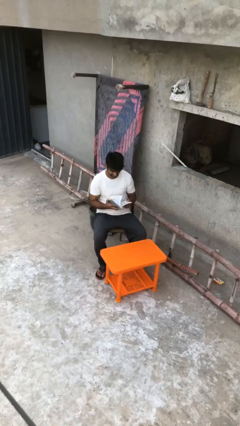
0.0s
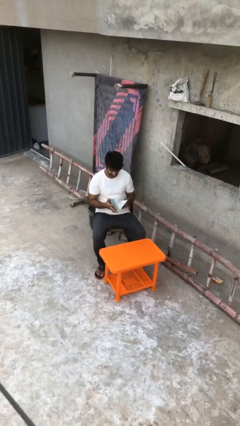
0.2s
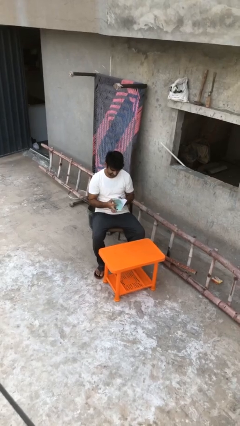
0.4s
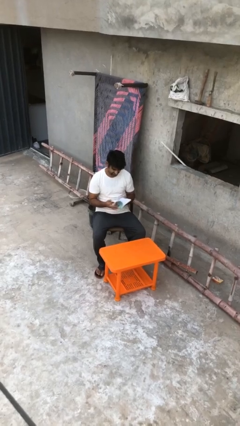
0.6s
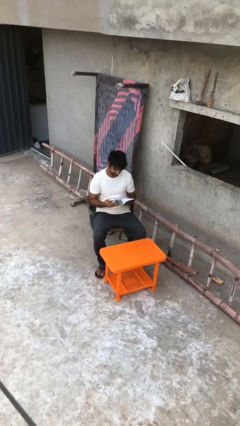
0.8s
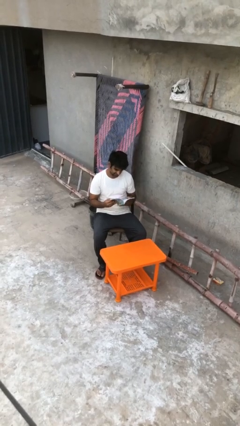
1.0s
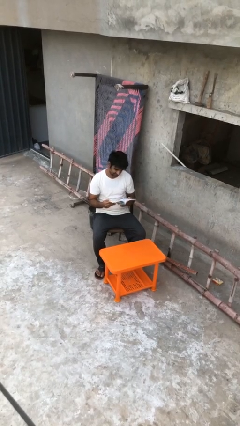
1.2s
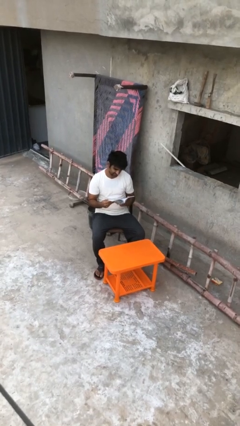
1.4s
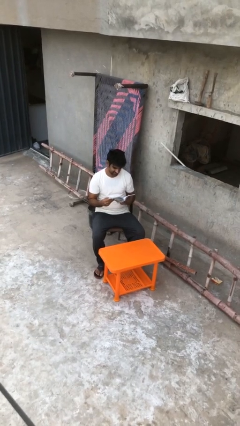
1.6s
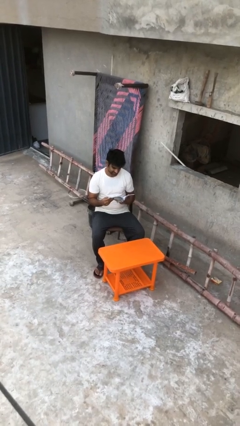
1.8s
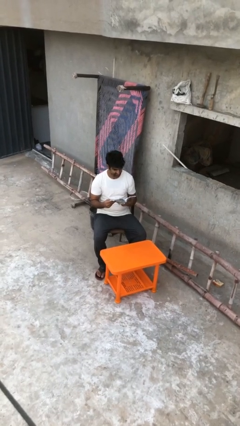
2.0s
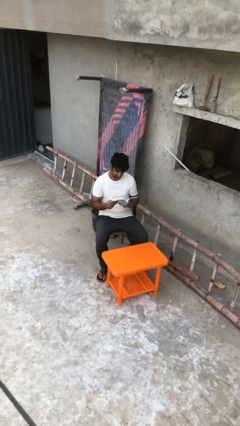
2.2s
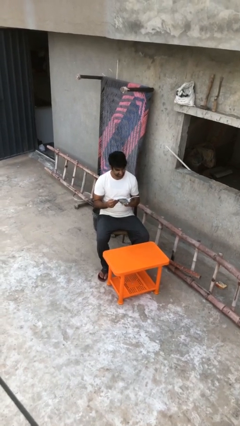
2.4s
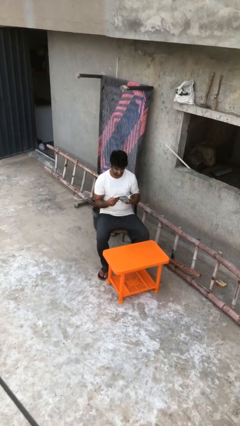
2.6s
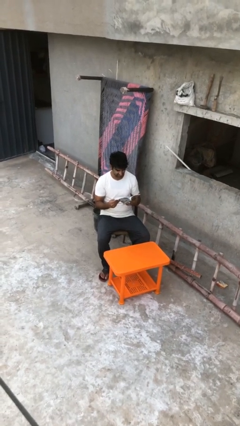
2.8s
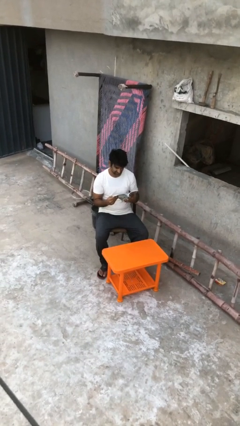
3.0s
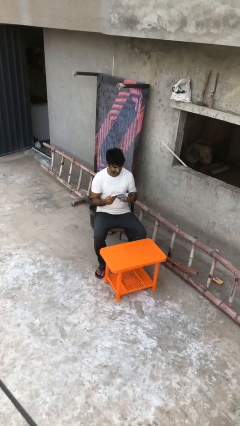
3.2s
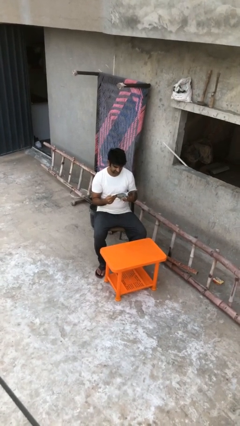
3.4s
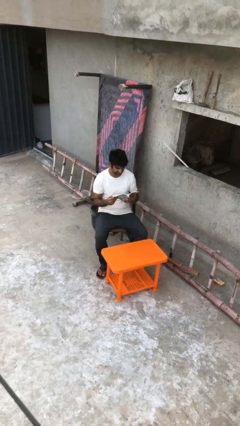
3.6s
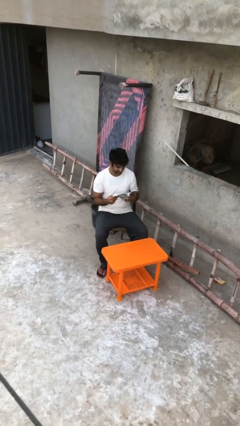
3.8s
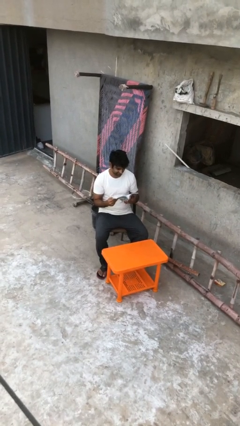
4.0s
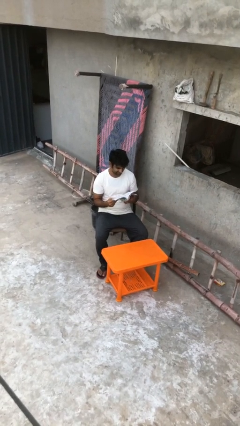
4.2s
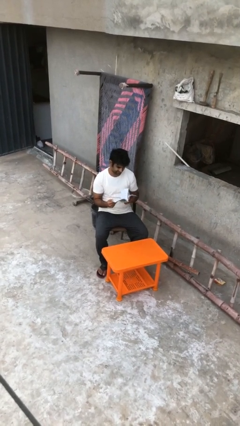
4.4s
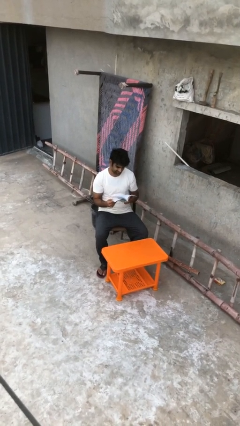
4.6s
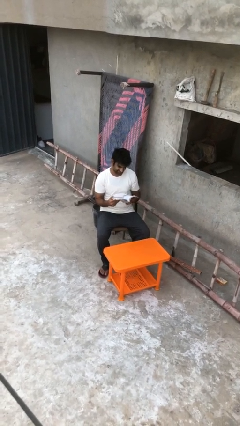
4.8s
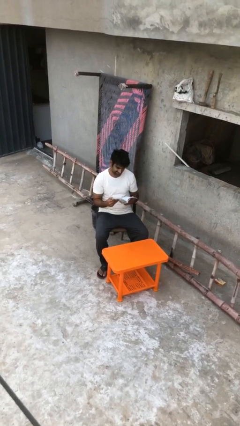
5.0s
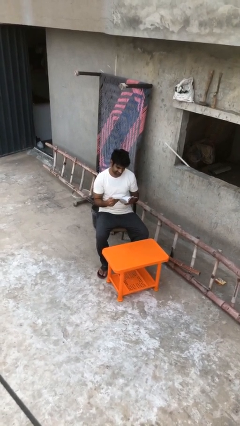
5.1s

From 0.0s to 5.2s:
person reads document

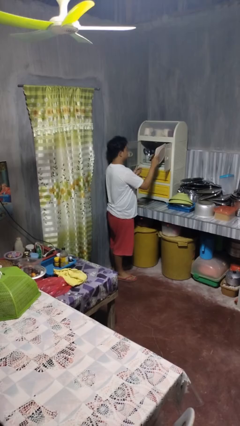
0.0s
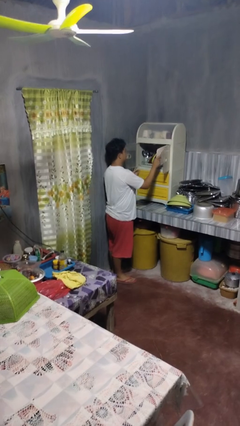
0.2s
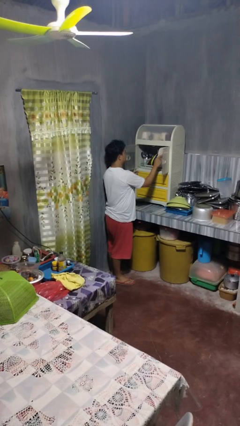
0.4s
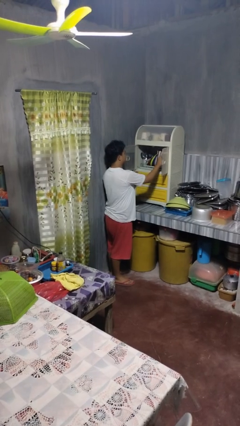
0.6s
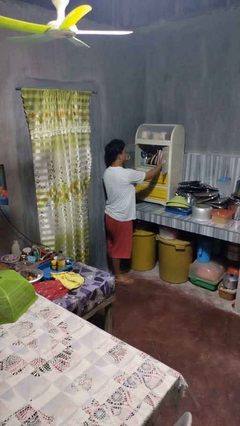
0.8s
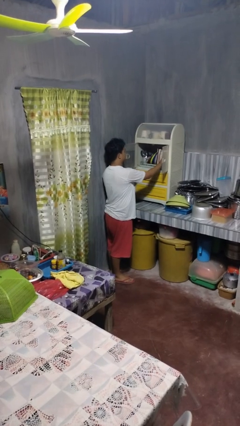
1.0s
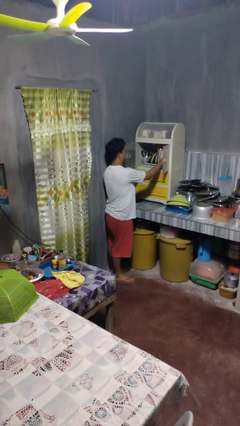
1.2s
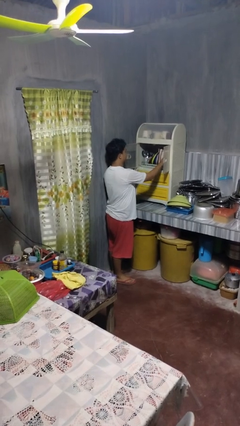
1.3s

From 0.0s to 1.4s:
person puts down object into cabinet

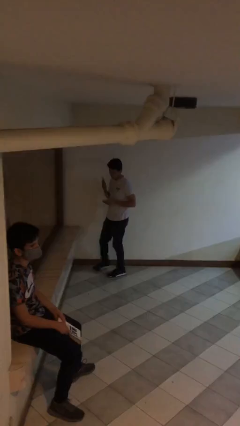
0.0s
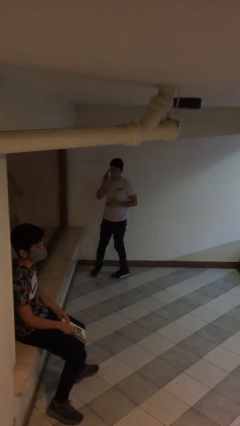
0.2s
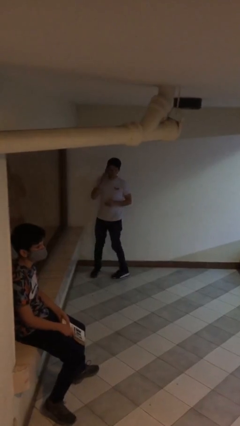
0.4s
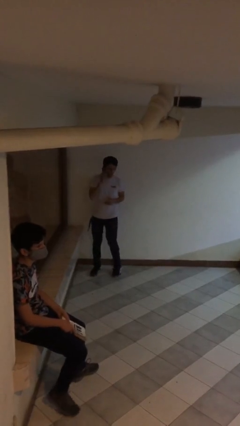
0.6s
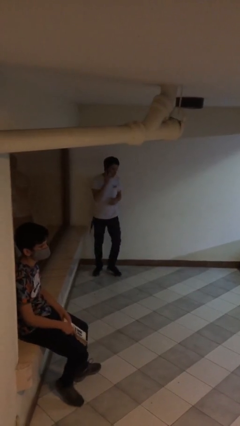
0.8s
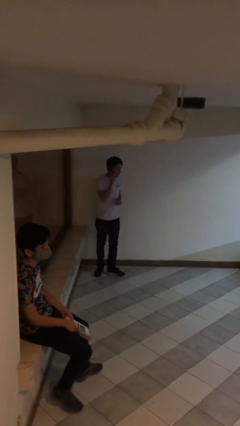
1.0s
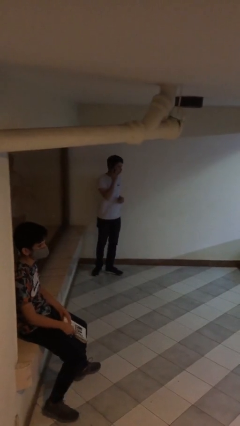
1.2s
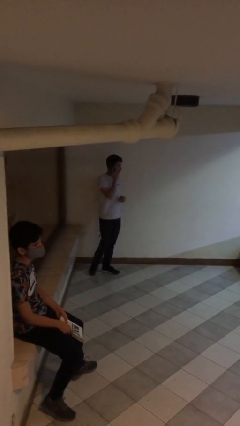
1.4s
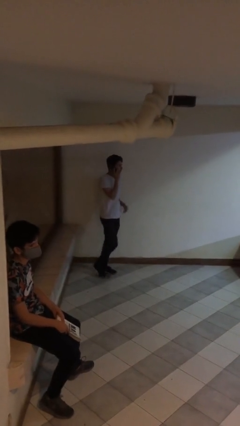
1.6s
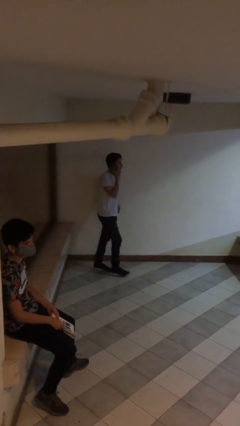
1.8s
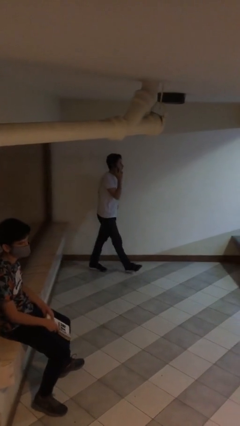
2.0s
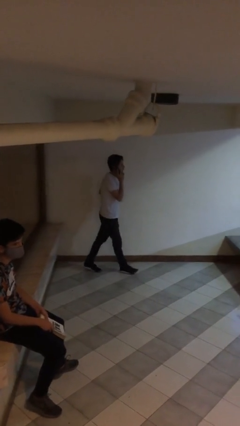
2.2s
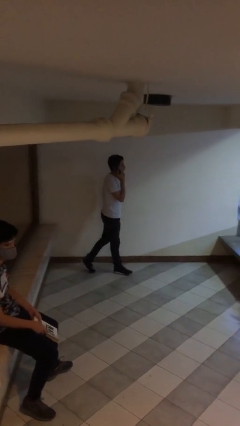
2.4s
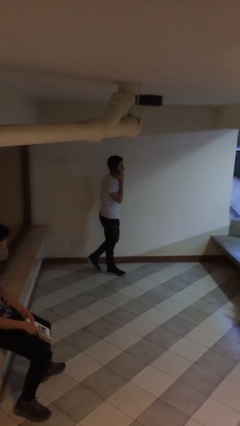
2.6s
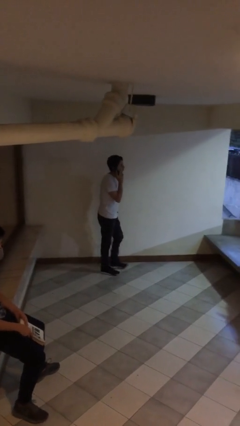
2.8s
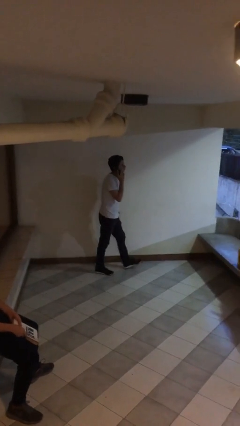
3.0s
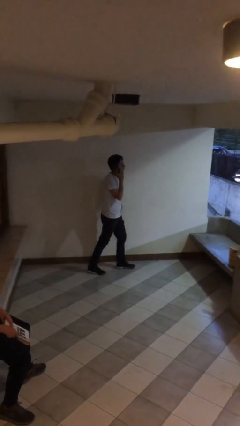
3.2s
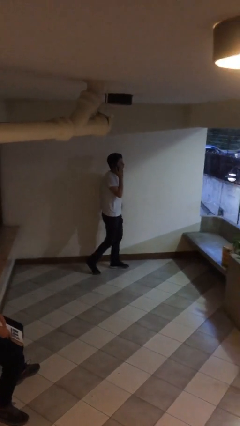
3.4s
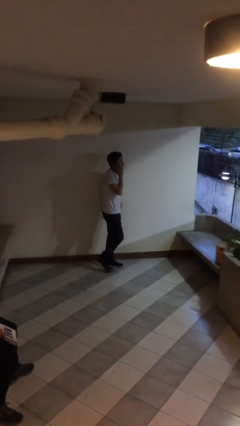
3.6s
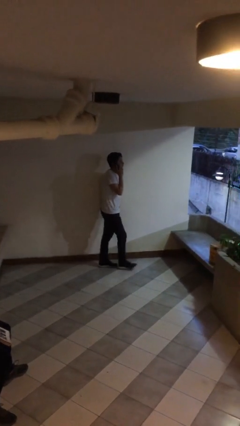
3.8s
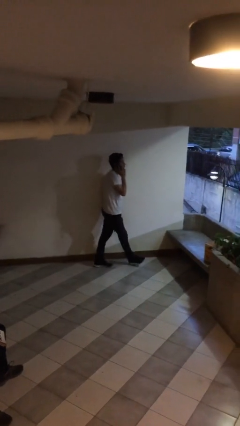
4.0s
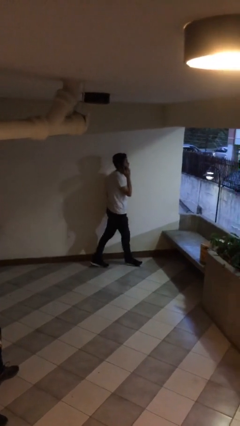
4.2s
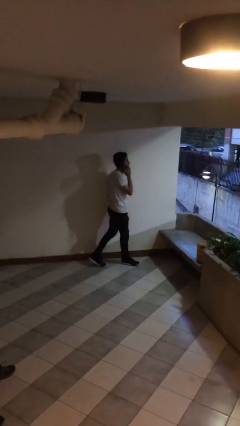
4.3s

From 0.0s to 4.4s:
person talks on phone

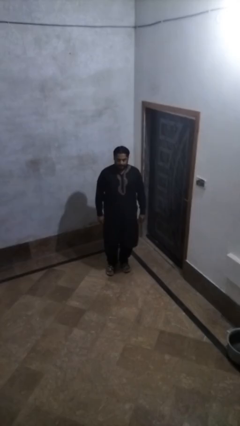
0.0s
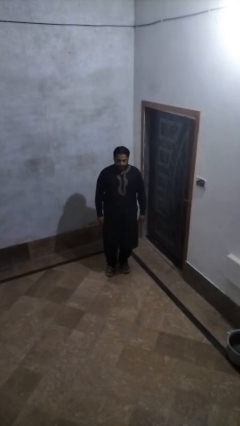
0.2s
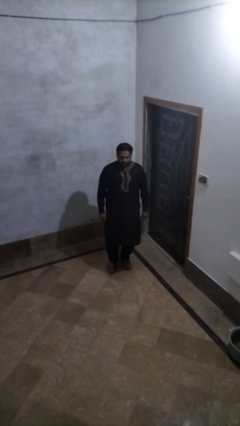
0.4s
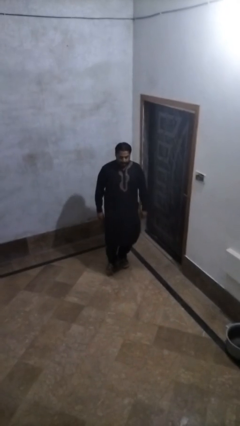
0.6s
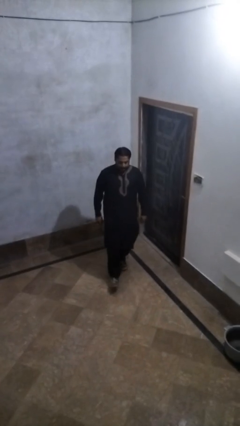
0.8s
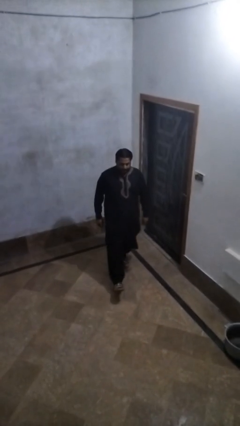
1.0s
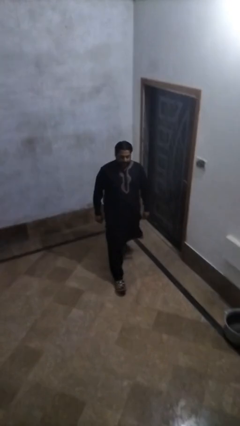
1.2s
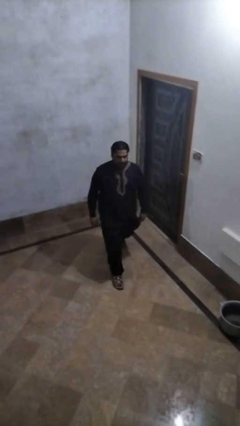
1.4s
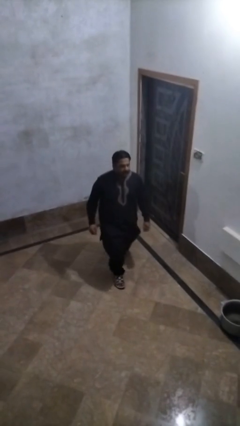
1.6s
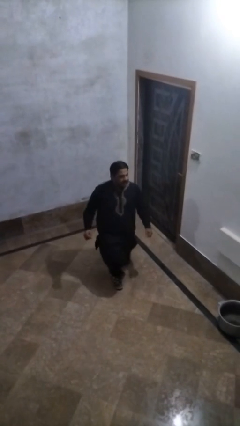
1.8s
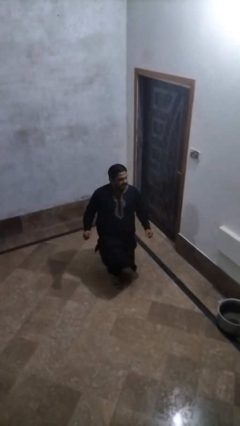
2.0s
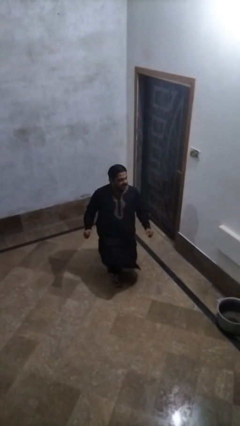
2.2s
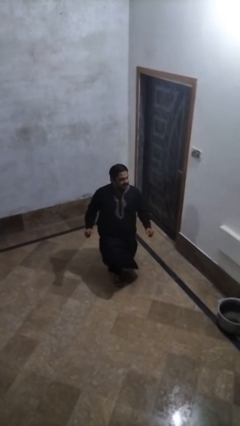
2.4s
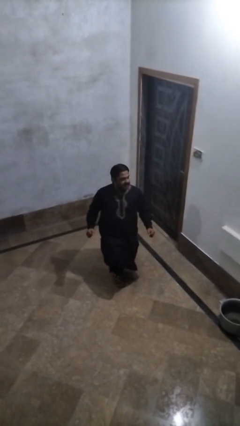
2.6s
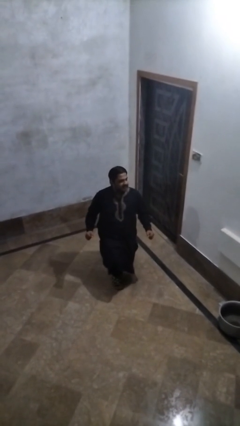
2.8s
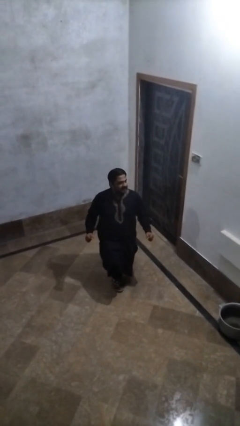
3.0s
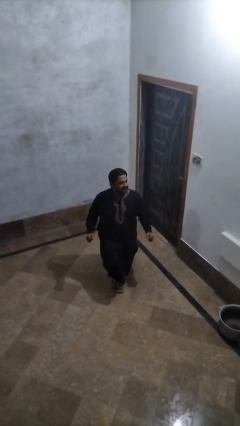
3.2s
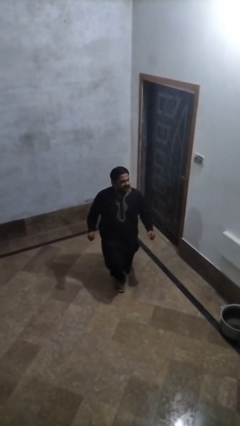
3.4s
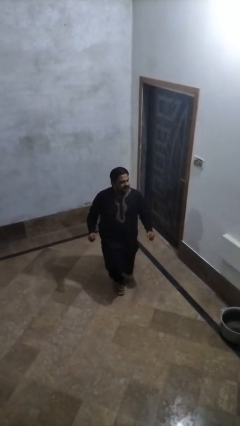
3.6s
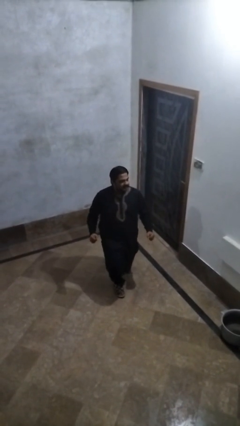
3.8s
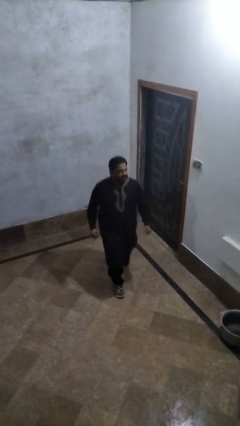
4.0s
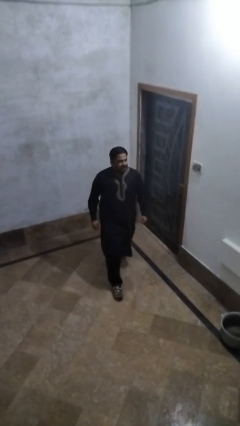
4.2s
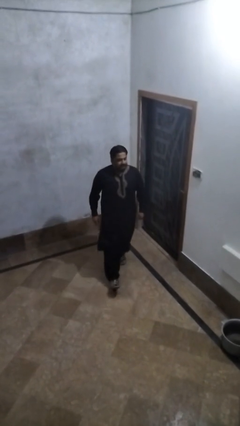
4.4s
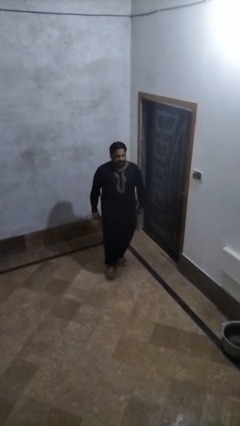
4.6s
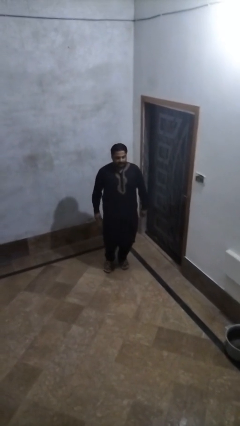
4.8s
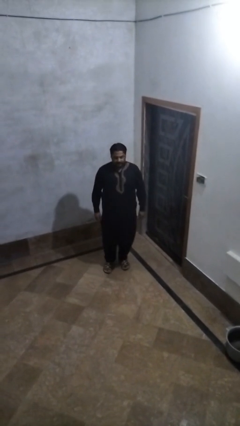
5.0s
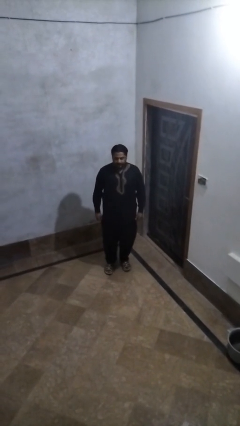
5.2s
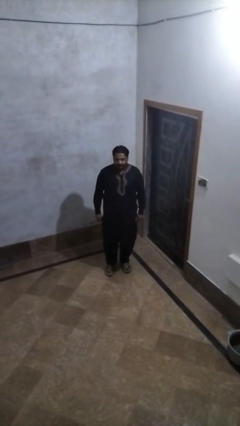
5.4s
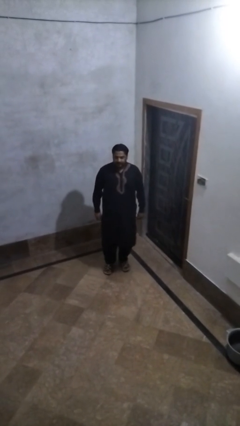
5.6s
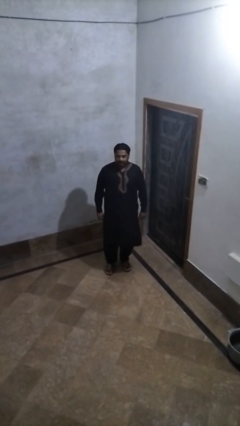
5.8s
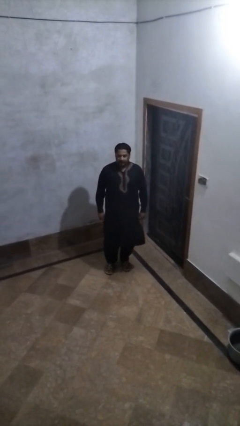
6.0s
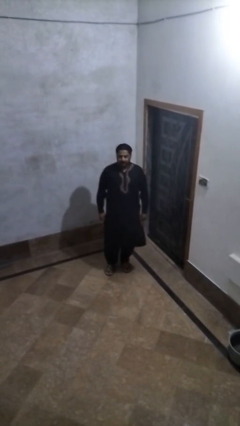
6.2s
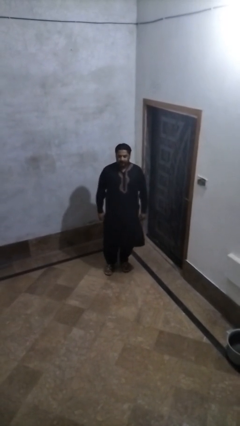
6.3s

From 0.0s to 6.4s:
person exercises with lunges

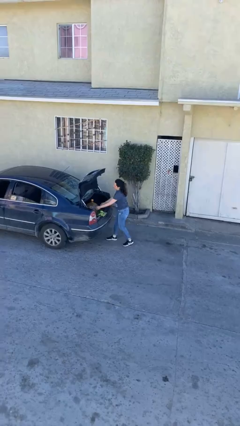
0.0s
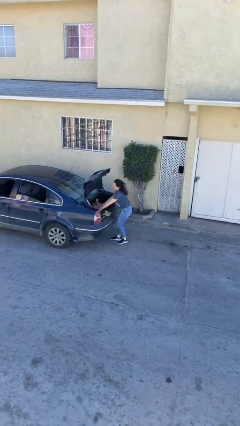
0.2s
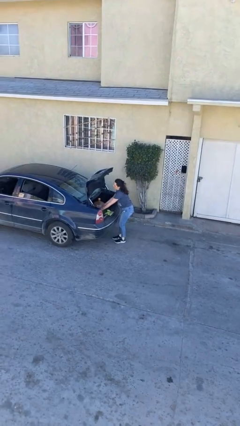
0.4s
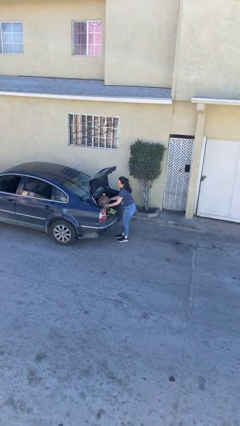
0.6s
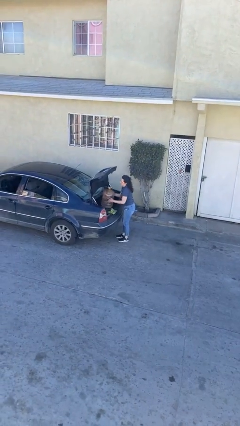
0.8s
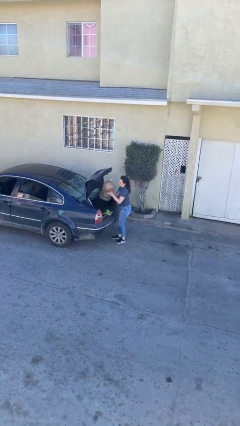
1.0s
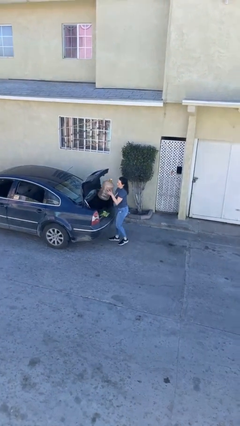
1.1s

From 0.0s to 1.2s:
person unloads car
